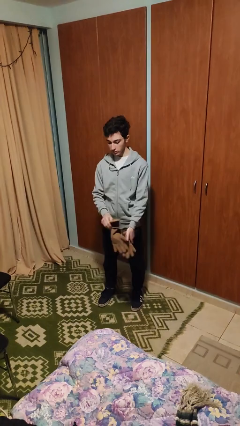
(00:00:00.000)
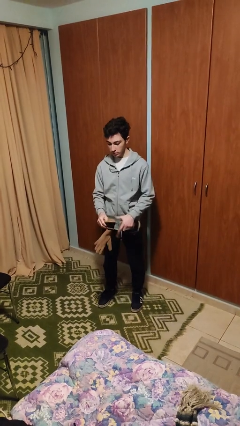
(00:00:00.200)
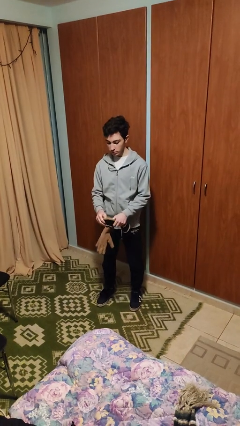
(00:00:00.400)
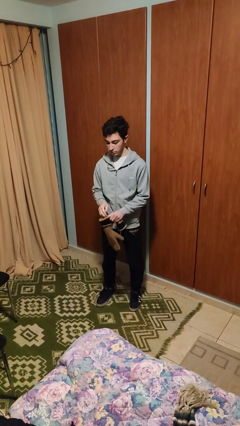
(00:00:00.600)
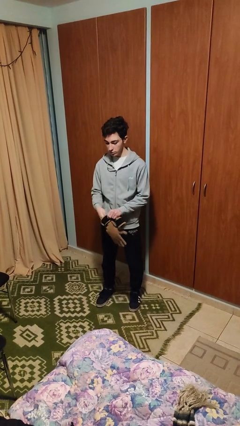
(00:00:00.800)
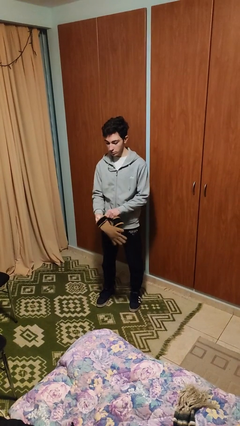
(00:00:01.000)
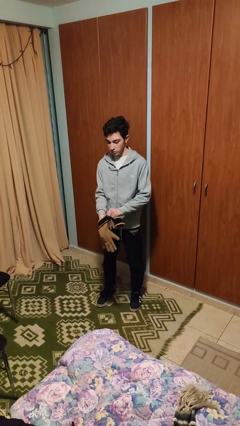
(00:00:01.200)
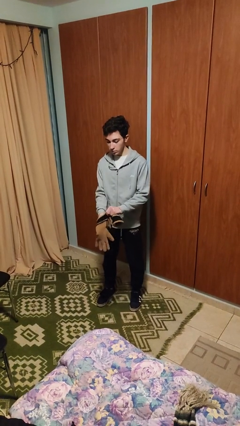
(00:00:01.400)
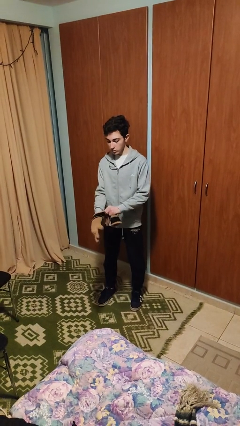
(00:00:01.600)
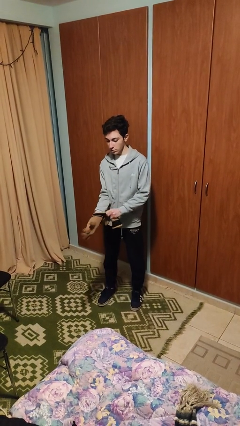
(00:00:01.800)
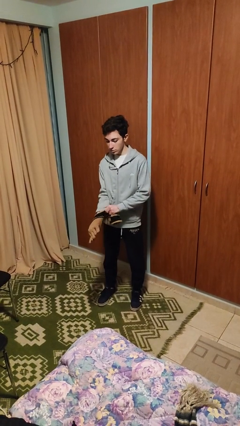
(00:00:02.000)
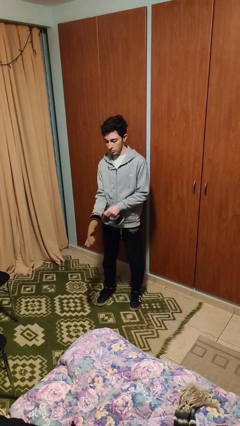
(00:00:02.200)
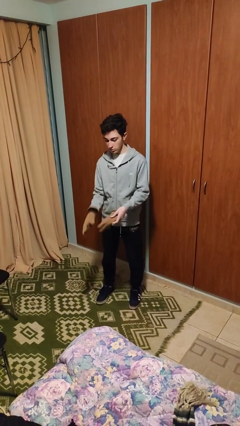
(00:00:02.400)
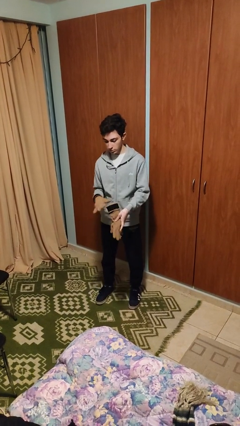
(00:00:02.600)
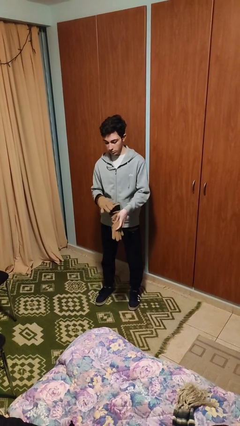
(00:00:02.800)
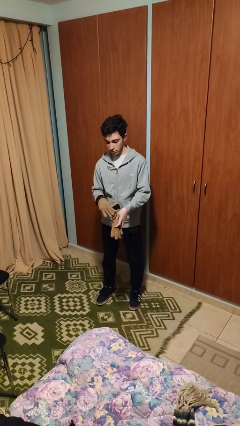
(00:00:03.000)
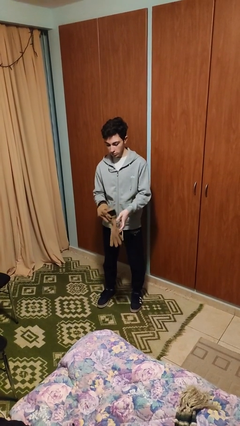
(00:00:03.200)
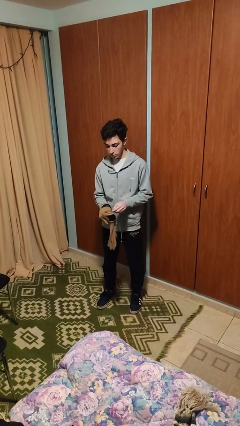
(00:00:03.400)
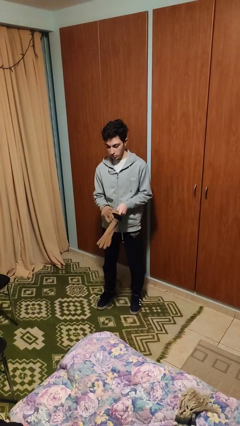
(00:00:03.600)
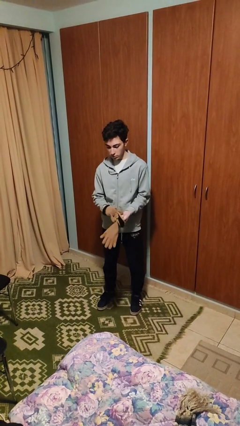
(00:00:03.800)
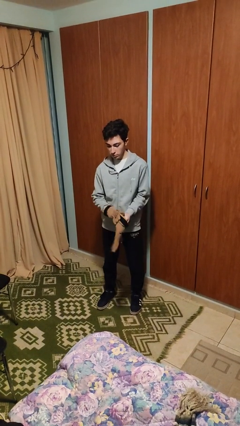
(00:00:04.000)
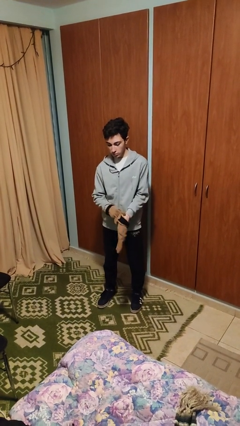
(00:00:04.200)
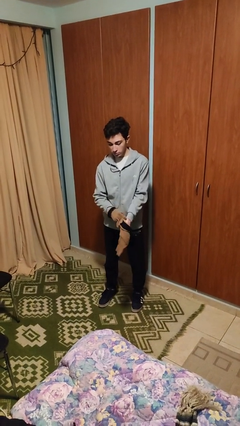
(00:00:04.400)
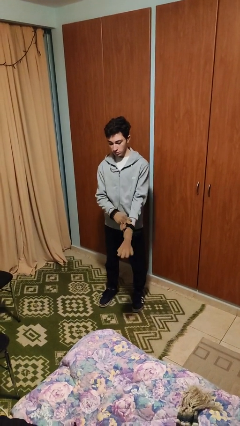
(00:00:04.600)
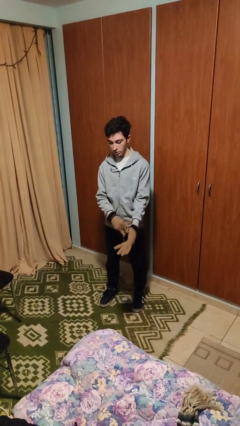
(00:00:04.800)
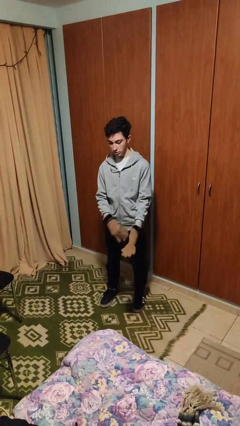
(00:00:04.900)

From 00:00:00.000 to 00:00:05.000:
person puts on gloves

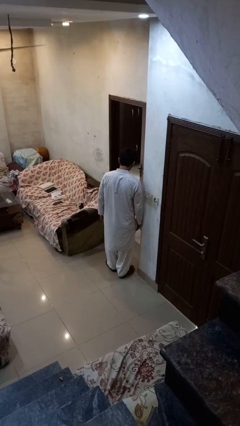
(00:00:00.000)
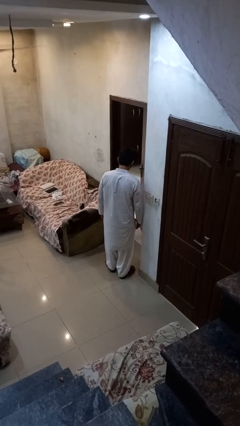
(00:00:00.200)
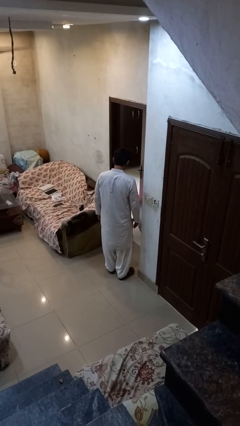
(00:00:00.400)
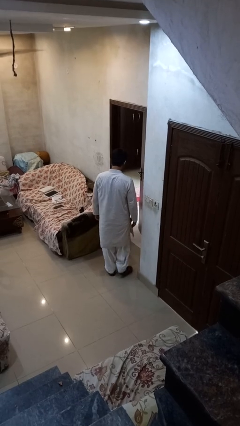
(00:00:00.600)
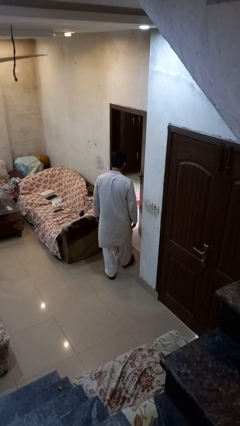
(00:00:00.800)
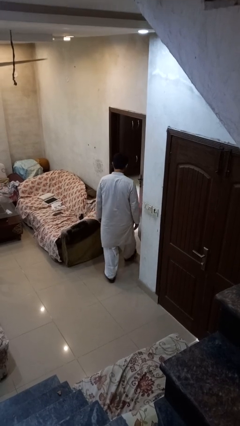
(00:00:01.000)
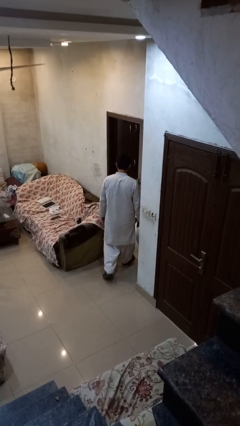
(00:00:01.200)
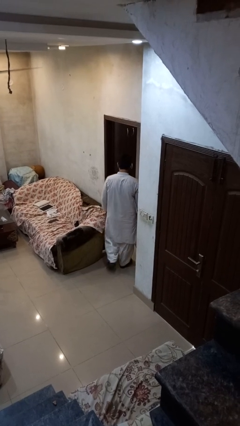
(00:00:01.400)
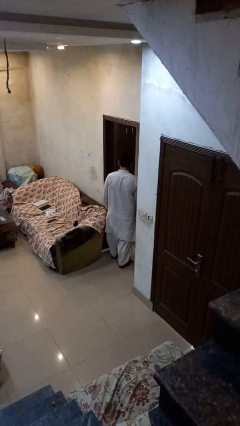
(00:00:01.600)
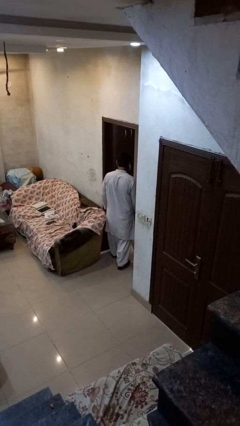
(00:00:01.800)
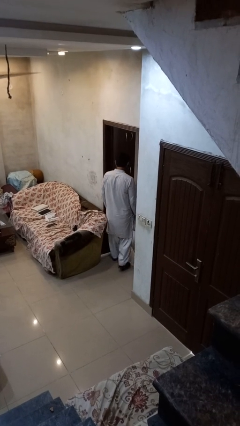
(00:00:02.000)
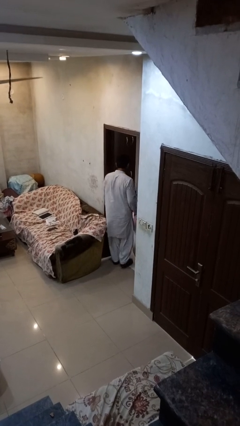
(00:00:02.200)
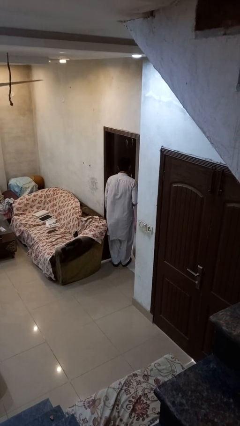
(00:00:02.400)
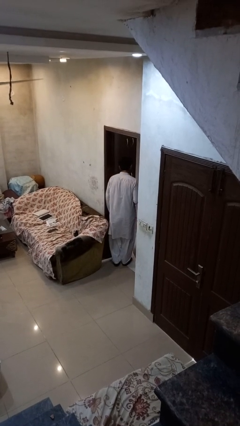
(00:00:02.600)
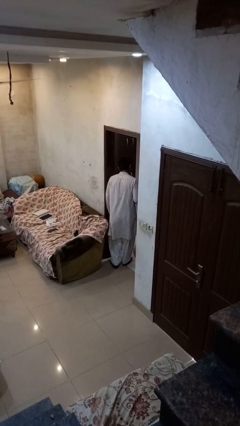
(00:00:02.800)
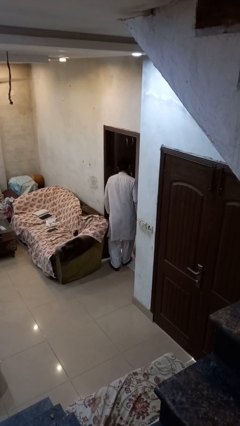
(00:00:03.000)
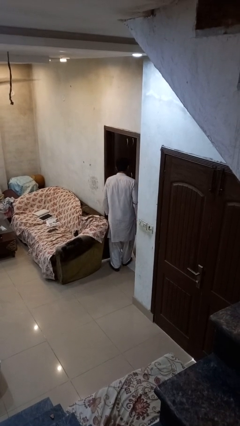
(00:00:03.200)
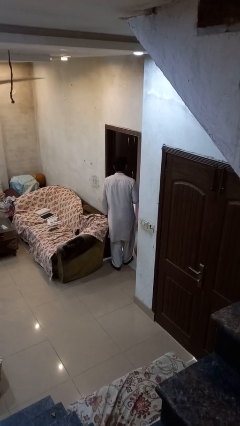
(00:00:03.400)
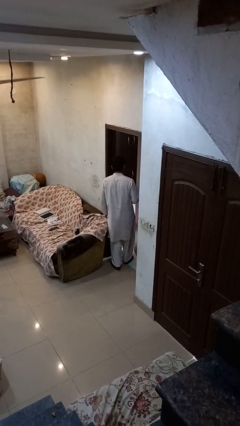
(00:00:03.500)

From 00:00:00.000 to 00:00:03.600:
person bumps into wall

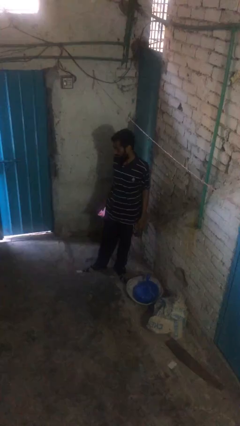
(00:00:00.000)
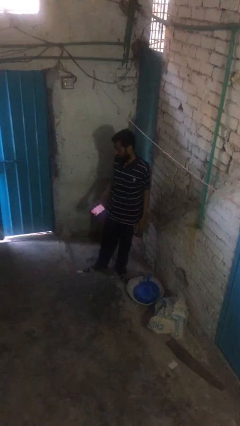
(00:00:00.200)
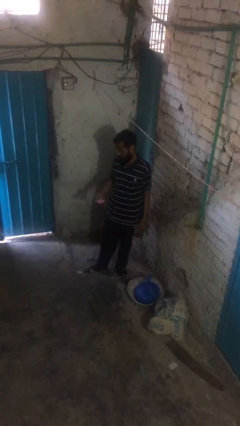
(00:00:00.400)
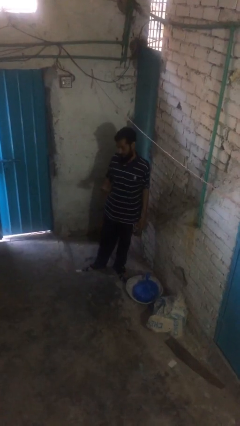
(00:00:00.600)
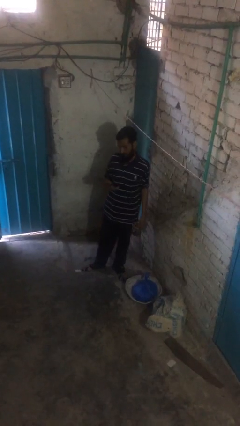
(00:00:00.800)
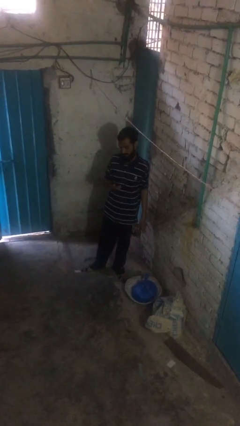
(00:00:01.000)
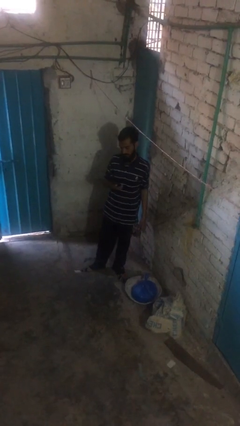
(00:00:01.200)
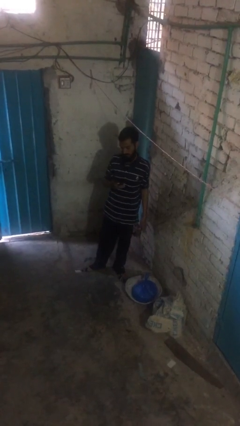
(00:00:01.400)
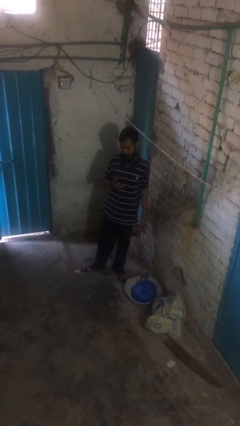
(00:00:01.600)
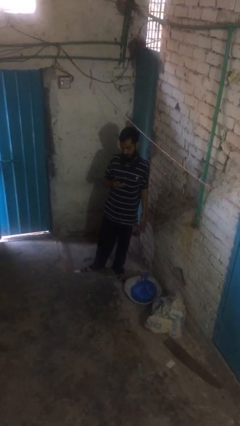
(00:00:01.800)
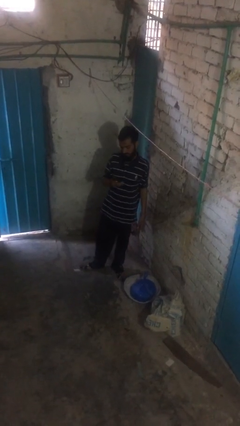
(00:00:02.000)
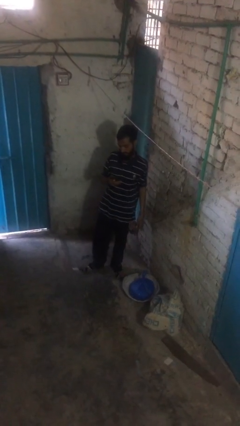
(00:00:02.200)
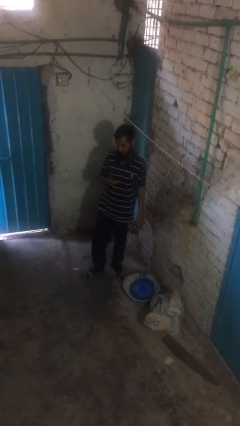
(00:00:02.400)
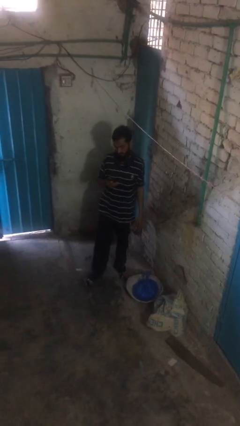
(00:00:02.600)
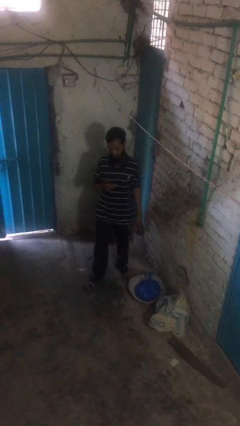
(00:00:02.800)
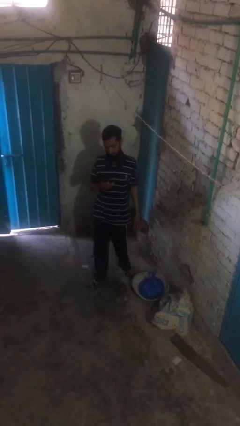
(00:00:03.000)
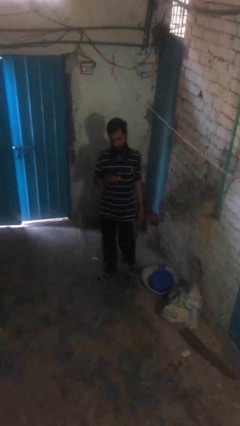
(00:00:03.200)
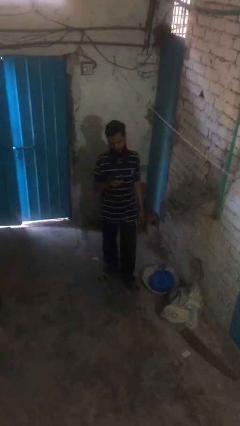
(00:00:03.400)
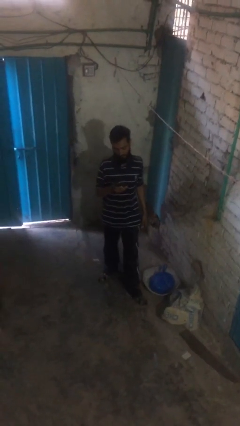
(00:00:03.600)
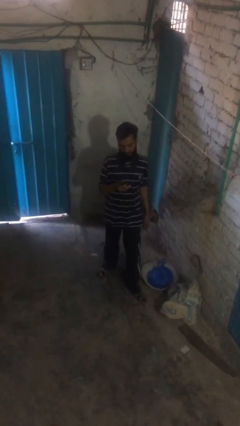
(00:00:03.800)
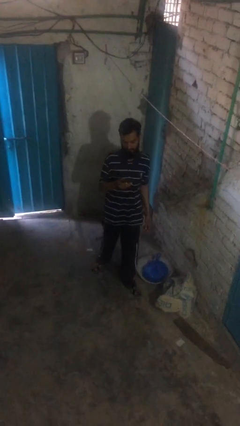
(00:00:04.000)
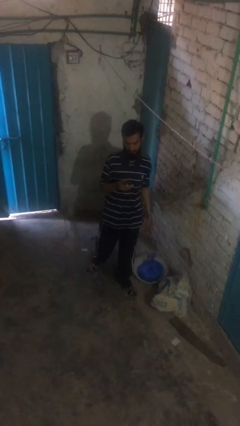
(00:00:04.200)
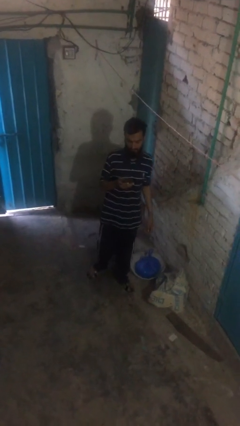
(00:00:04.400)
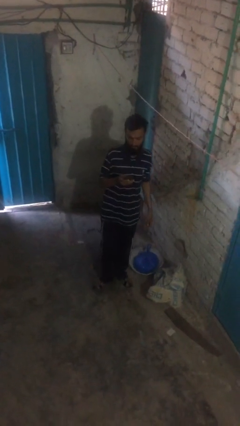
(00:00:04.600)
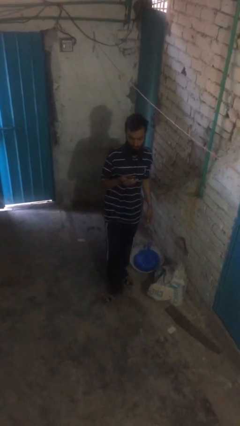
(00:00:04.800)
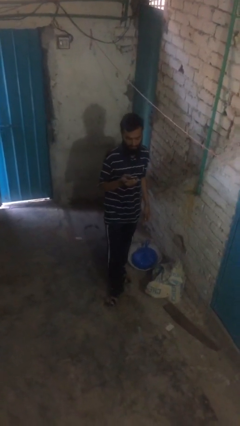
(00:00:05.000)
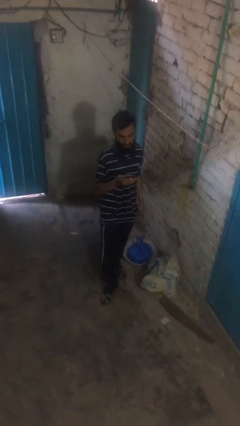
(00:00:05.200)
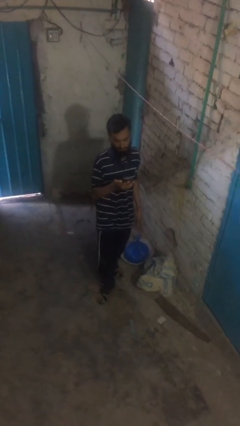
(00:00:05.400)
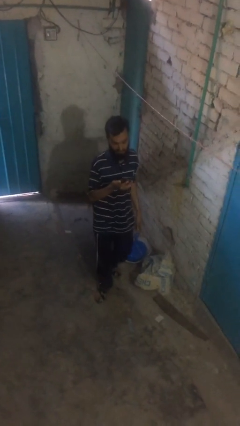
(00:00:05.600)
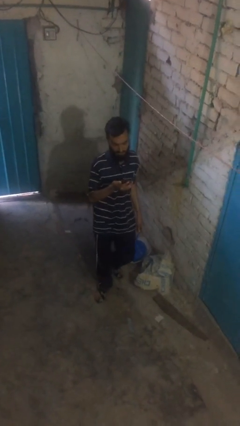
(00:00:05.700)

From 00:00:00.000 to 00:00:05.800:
person texts on phone

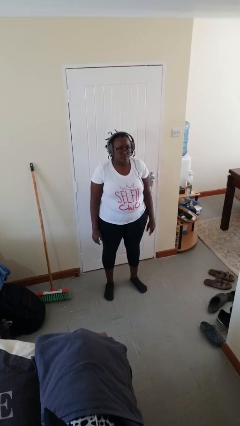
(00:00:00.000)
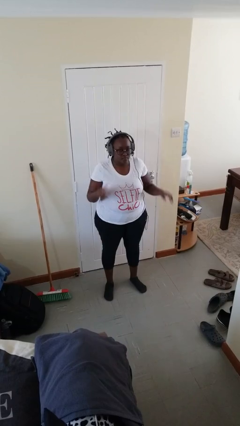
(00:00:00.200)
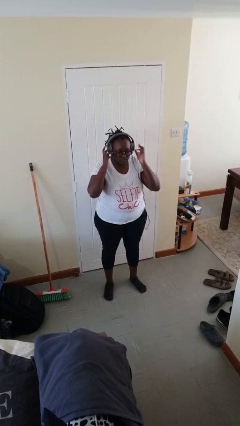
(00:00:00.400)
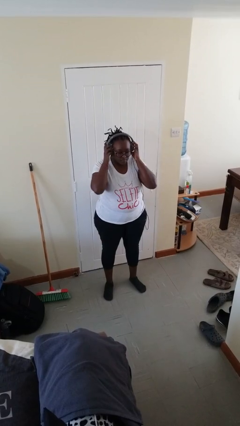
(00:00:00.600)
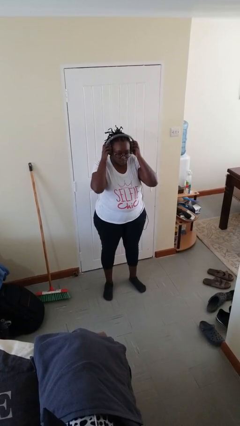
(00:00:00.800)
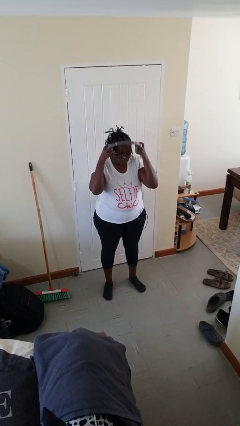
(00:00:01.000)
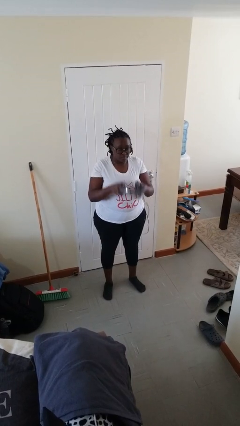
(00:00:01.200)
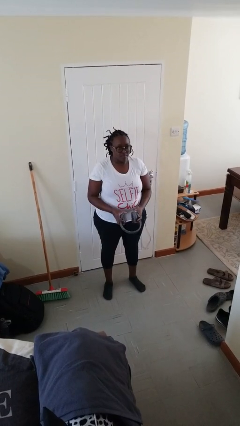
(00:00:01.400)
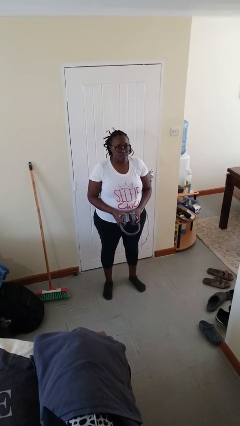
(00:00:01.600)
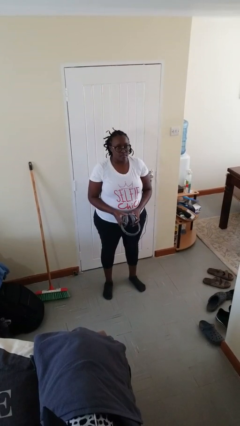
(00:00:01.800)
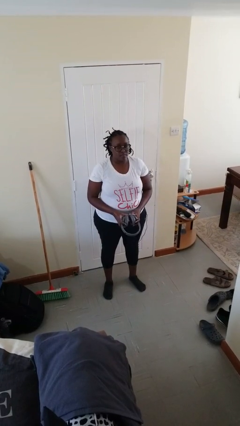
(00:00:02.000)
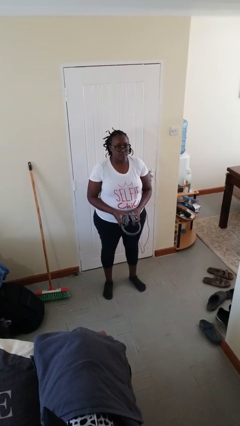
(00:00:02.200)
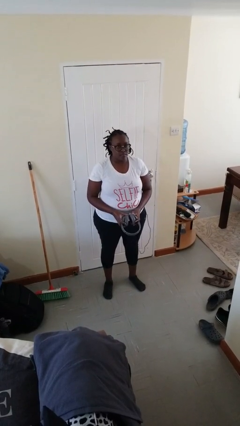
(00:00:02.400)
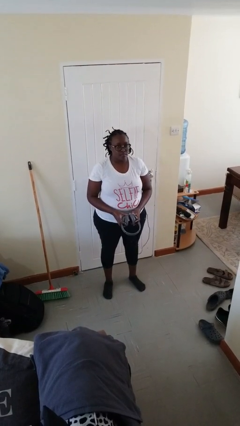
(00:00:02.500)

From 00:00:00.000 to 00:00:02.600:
person takes off headphones

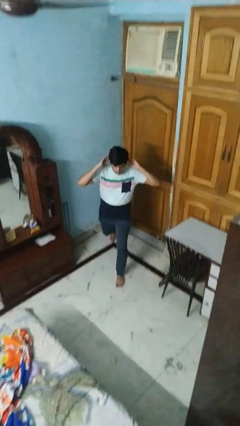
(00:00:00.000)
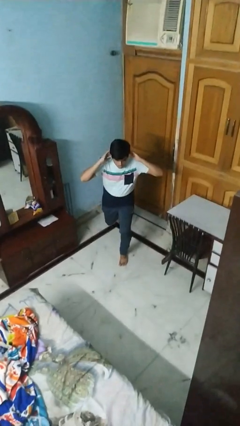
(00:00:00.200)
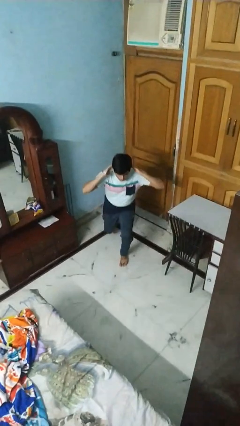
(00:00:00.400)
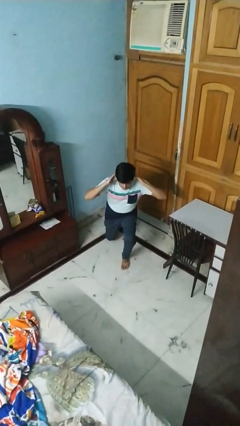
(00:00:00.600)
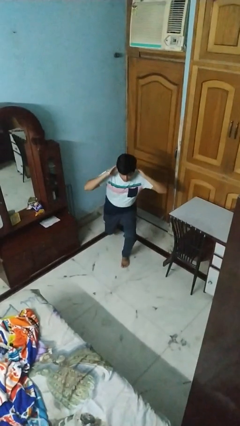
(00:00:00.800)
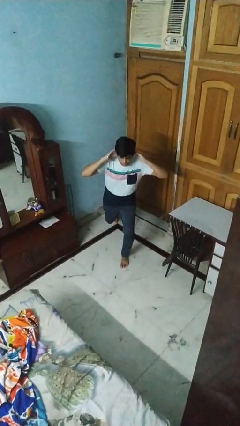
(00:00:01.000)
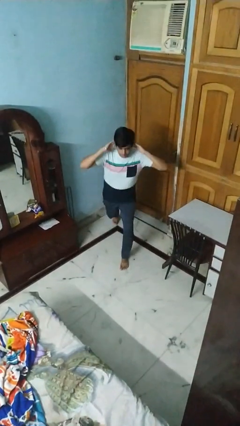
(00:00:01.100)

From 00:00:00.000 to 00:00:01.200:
person exercises with lunges
